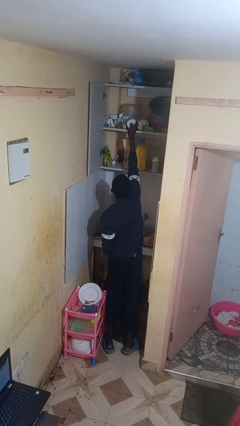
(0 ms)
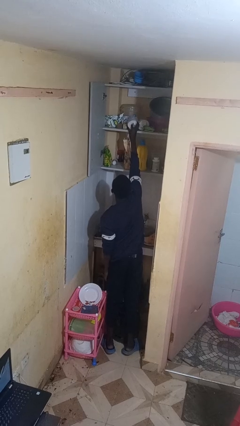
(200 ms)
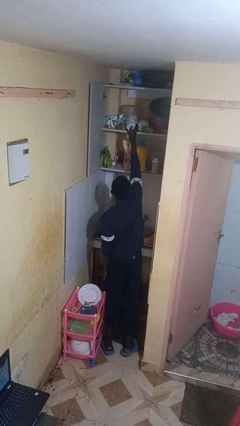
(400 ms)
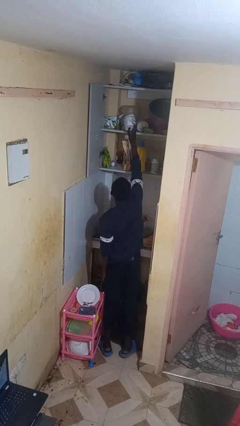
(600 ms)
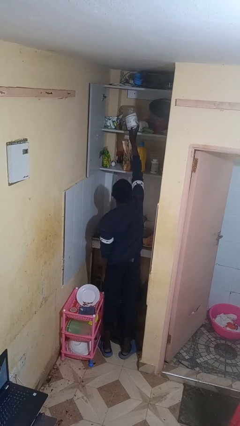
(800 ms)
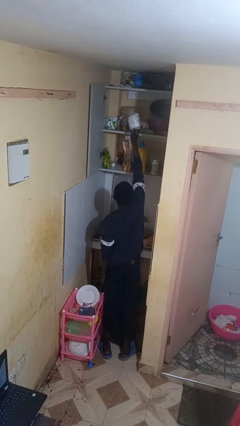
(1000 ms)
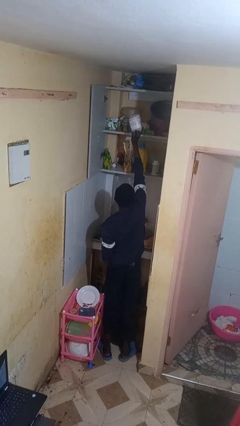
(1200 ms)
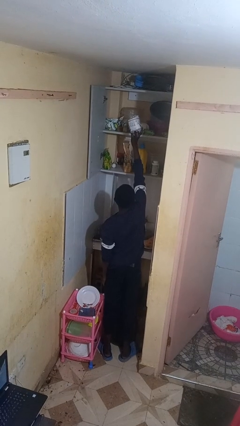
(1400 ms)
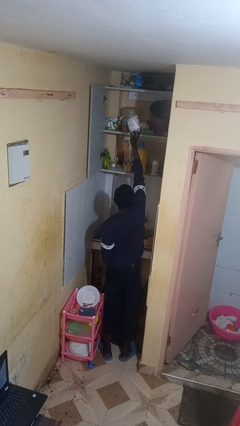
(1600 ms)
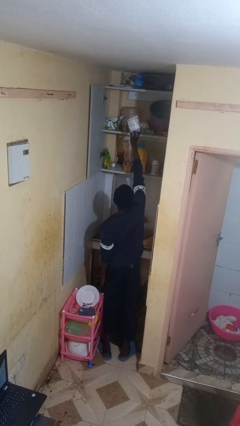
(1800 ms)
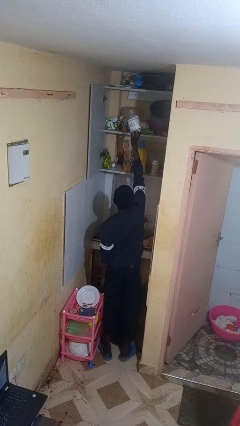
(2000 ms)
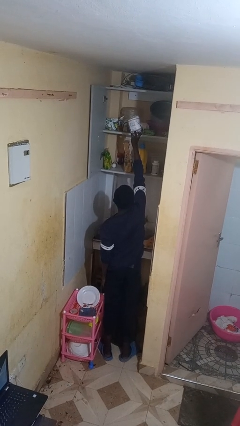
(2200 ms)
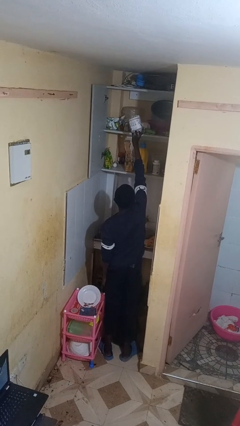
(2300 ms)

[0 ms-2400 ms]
person takes object from cabinet

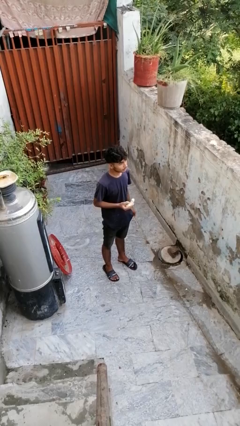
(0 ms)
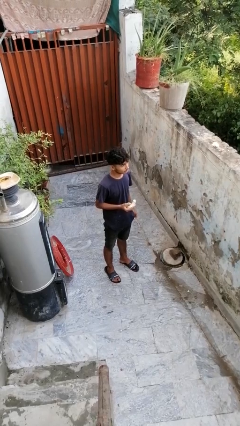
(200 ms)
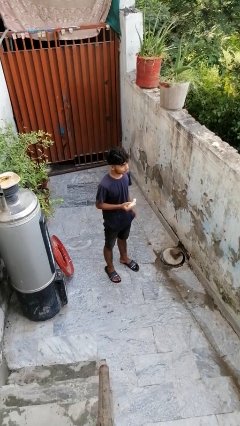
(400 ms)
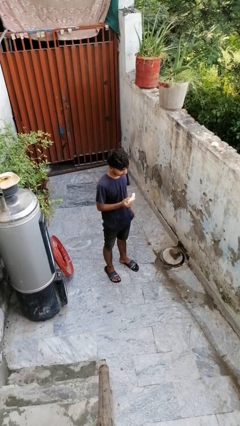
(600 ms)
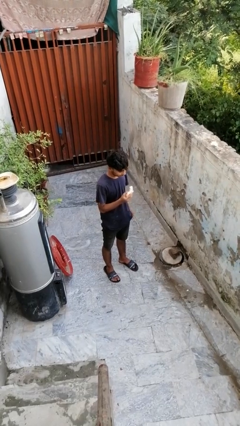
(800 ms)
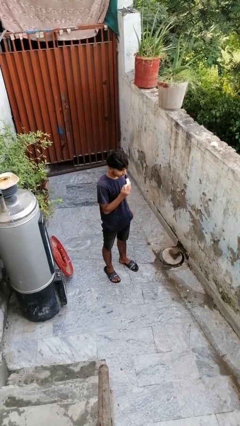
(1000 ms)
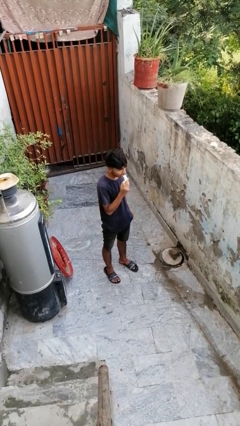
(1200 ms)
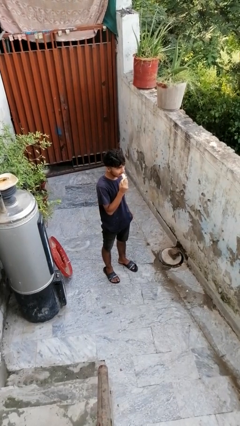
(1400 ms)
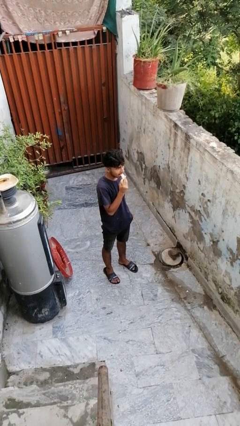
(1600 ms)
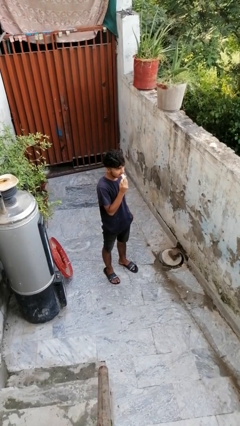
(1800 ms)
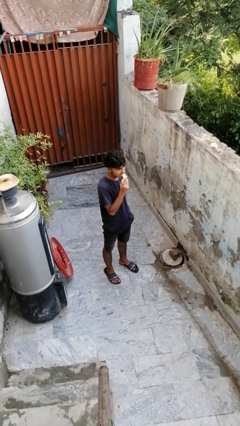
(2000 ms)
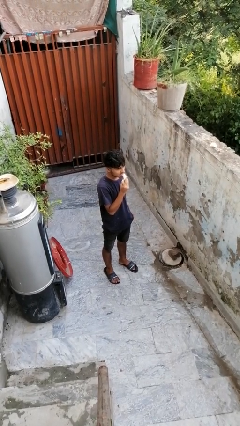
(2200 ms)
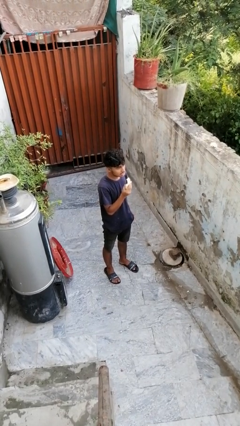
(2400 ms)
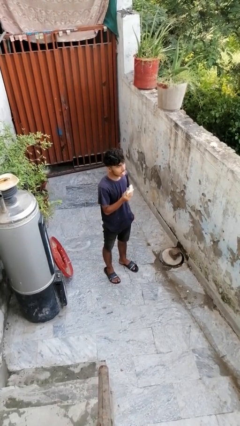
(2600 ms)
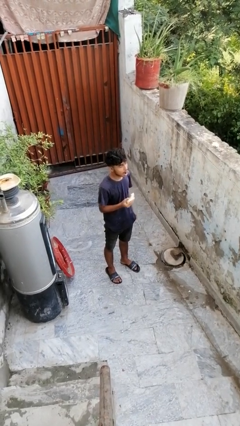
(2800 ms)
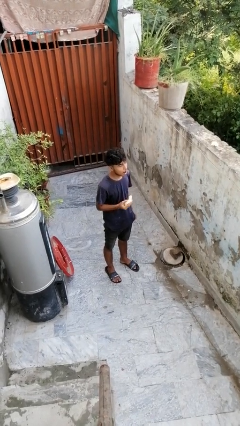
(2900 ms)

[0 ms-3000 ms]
person eats banana

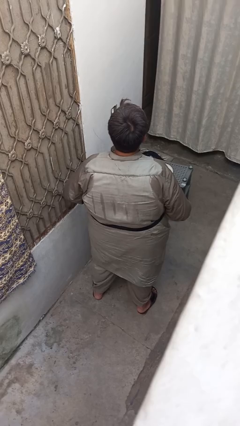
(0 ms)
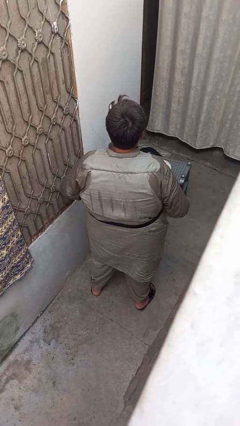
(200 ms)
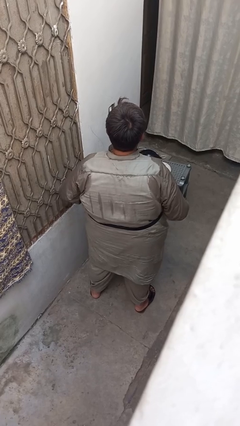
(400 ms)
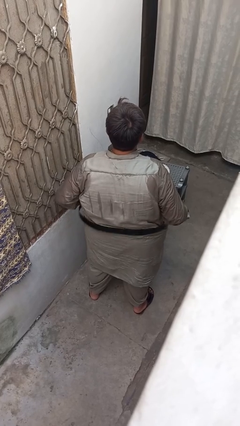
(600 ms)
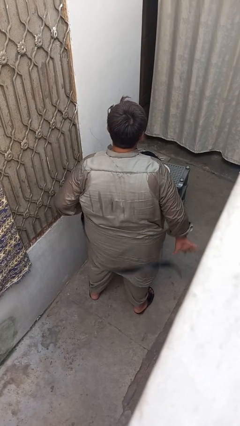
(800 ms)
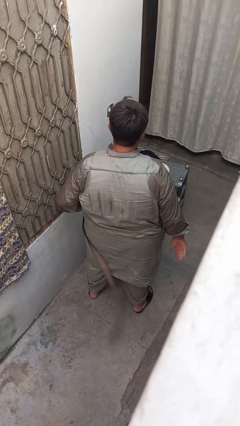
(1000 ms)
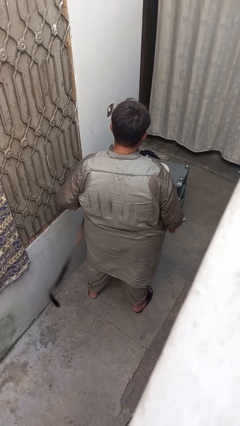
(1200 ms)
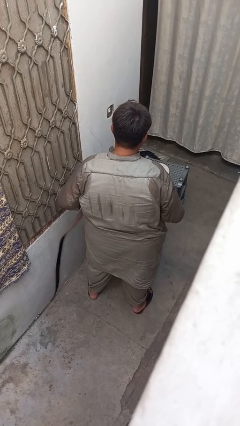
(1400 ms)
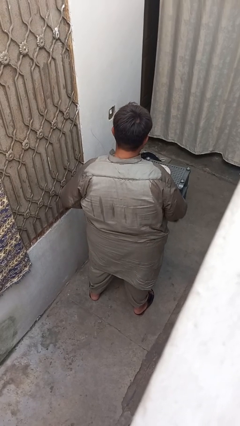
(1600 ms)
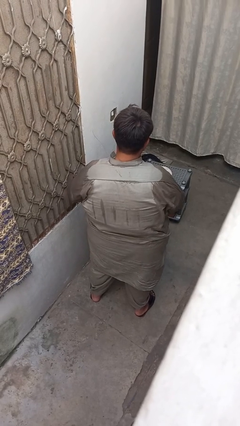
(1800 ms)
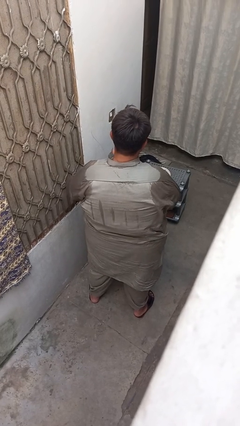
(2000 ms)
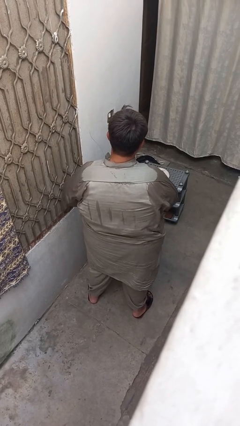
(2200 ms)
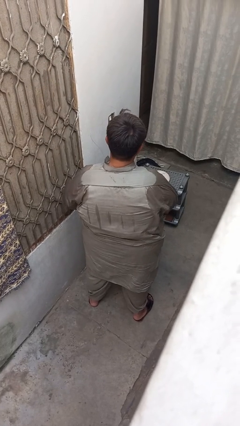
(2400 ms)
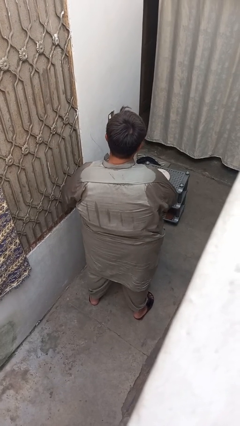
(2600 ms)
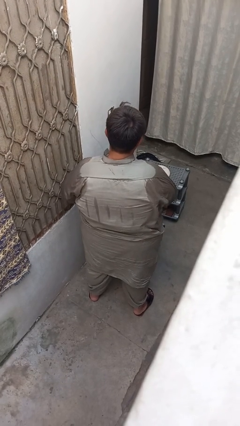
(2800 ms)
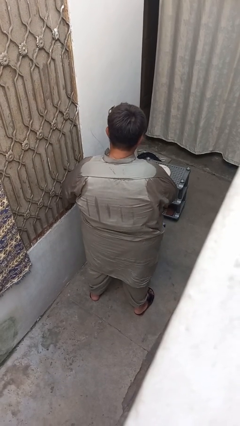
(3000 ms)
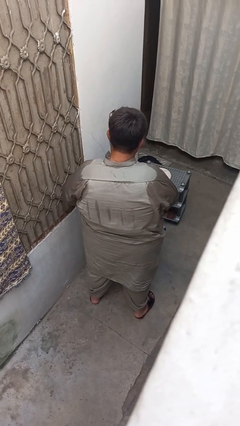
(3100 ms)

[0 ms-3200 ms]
person takes off belt

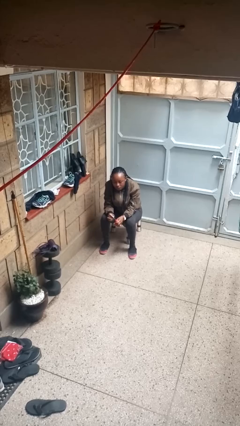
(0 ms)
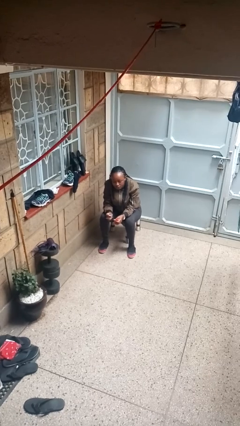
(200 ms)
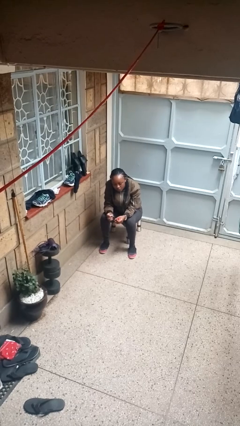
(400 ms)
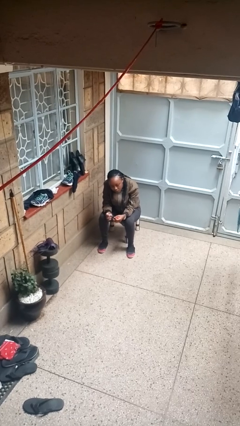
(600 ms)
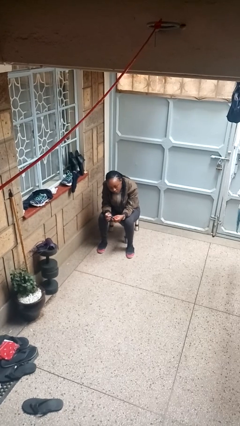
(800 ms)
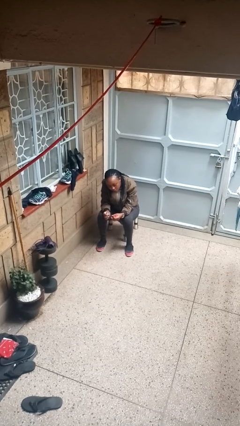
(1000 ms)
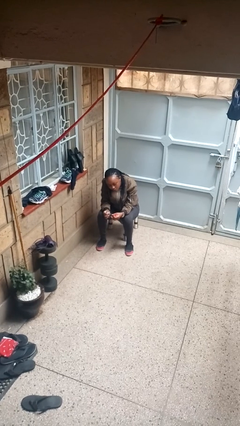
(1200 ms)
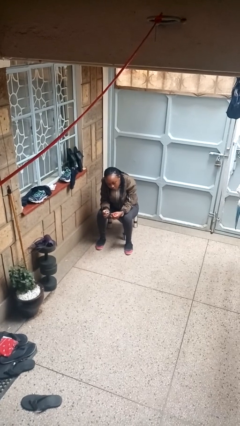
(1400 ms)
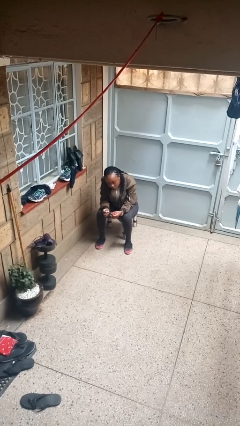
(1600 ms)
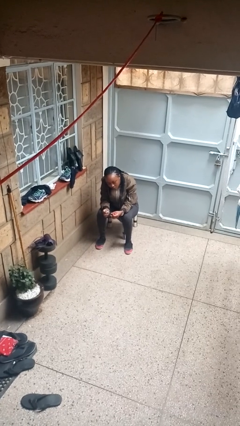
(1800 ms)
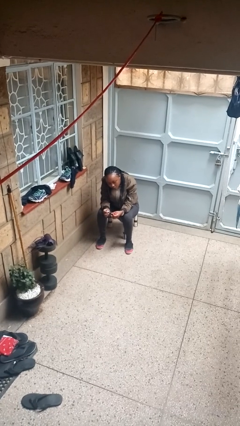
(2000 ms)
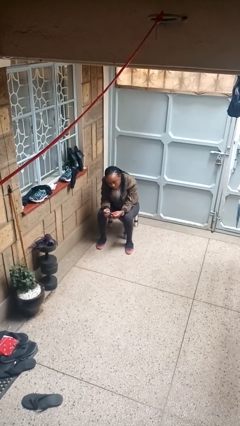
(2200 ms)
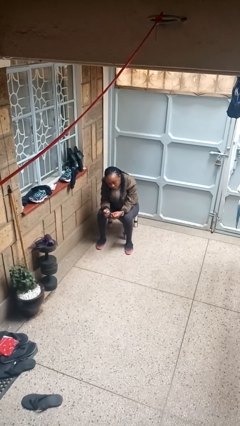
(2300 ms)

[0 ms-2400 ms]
person paints fingernails

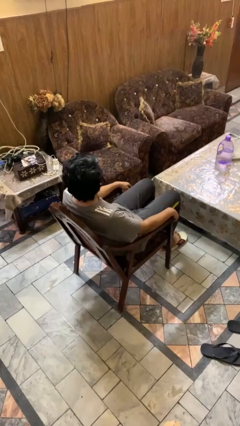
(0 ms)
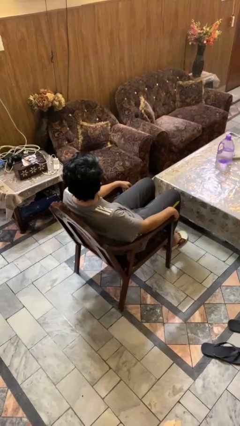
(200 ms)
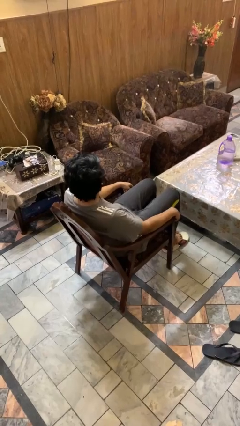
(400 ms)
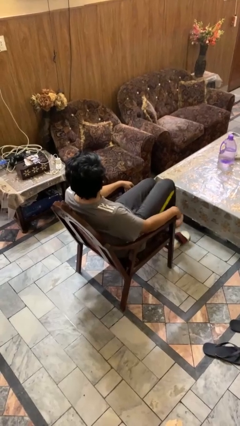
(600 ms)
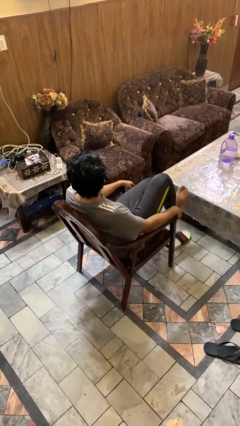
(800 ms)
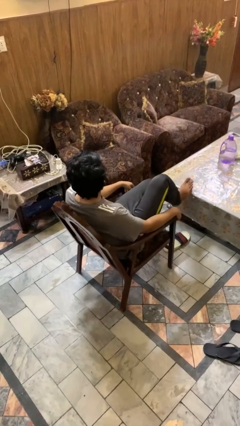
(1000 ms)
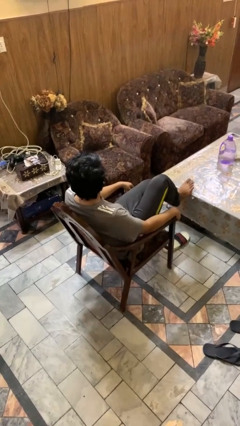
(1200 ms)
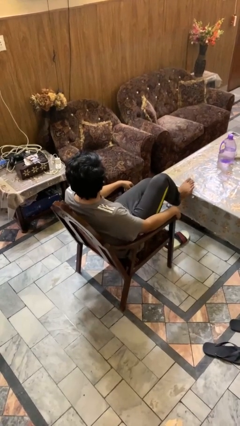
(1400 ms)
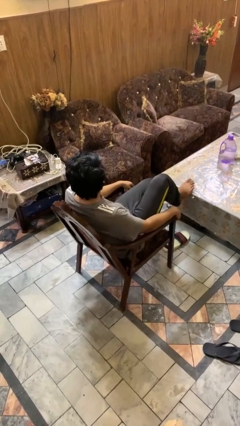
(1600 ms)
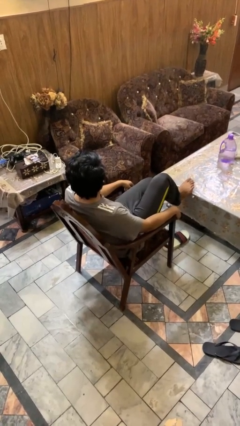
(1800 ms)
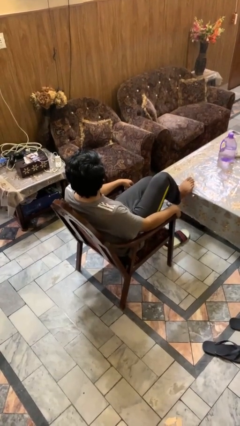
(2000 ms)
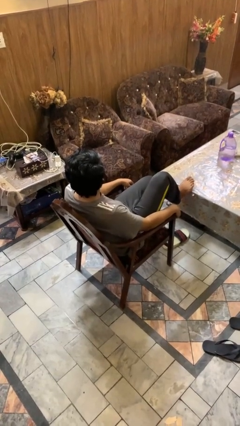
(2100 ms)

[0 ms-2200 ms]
person puts feet up

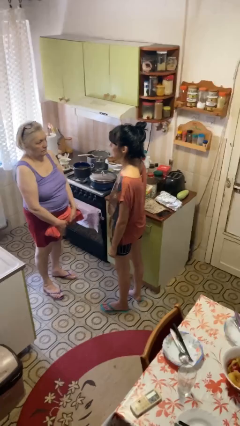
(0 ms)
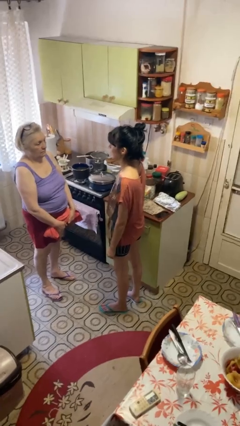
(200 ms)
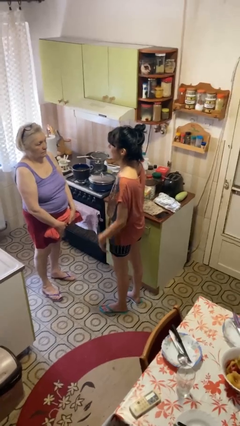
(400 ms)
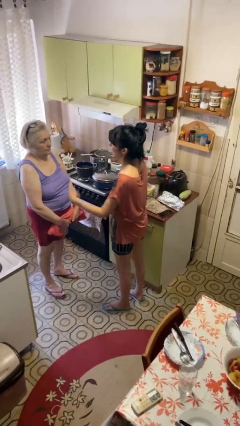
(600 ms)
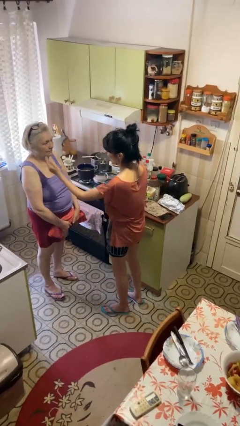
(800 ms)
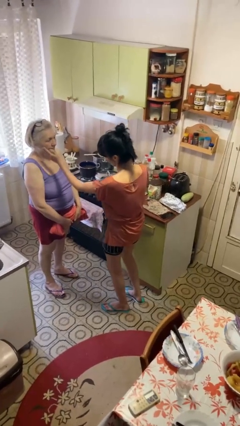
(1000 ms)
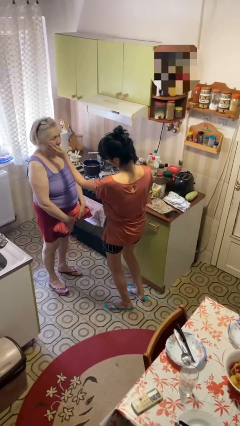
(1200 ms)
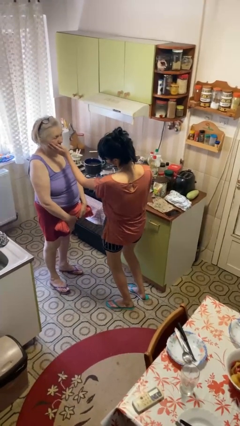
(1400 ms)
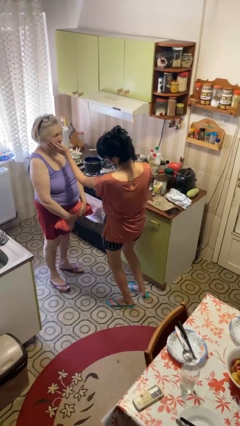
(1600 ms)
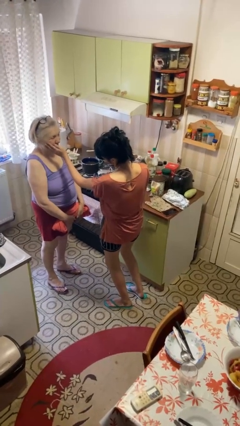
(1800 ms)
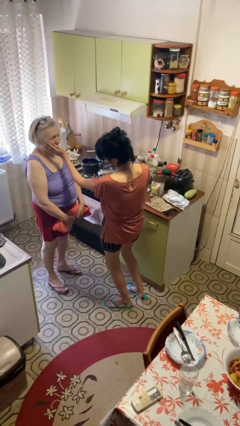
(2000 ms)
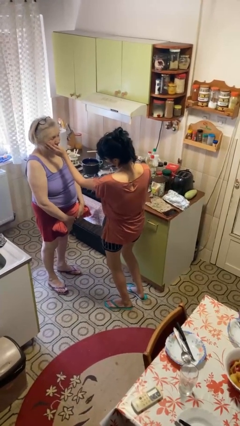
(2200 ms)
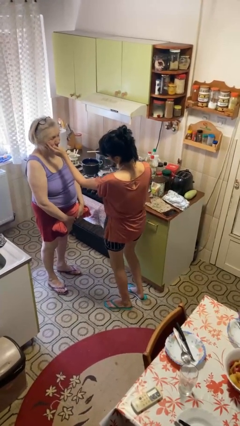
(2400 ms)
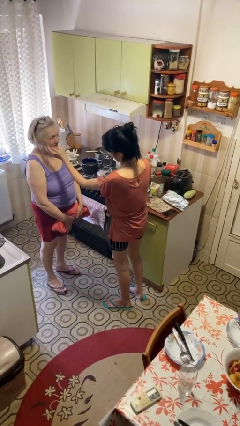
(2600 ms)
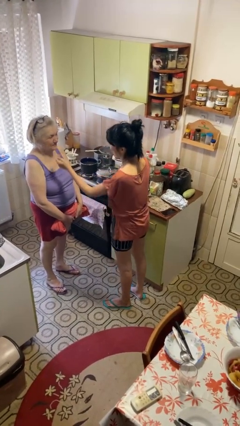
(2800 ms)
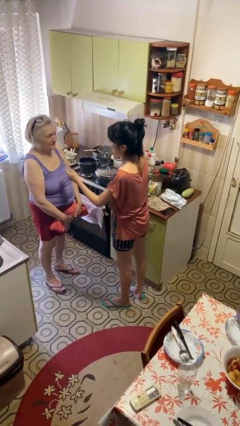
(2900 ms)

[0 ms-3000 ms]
person touches face of person

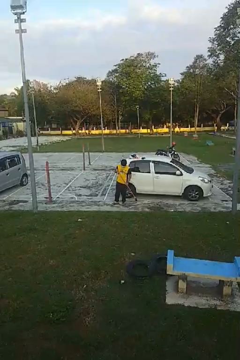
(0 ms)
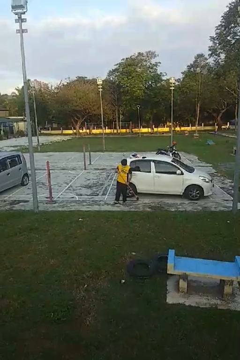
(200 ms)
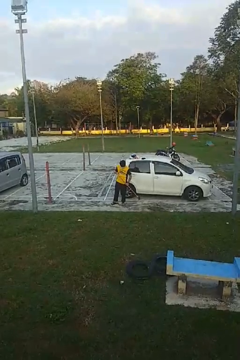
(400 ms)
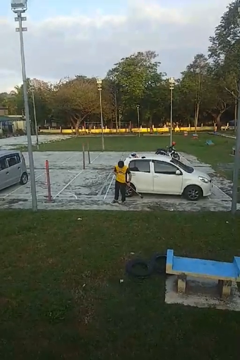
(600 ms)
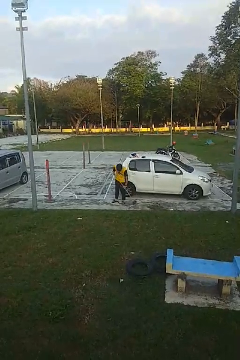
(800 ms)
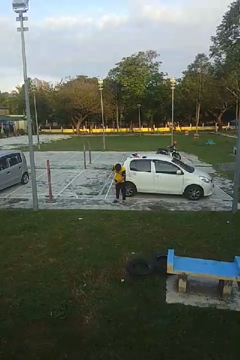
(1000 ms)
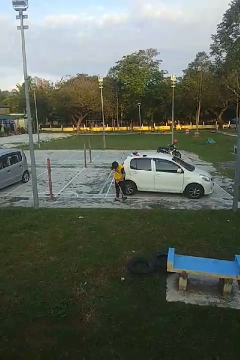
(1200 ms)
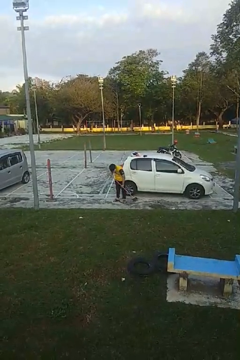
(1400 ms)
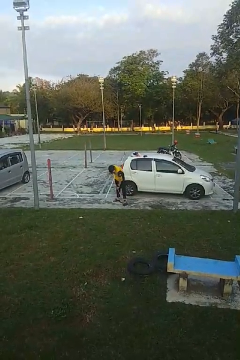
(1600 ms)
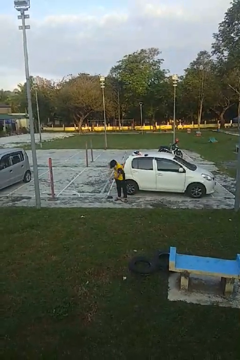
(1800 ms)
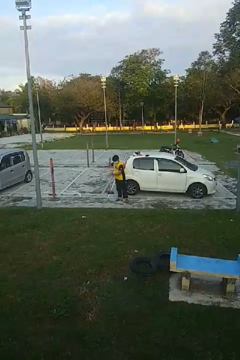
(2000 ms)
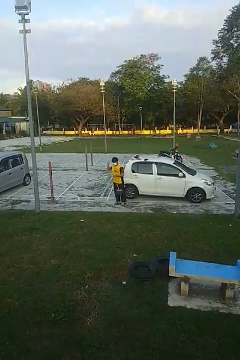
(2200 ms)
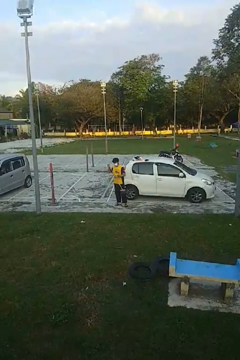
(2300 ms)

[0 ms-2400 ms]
person sweeps floor
